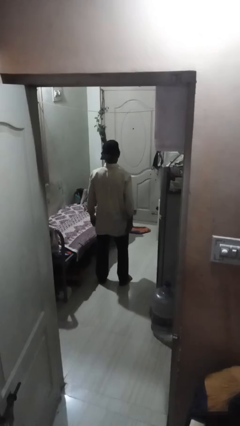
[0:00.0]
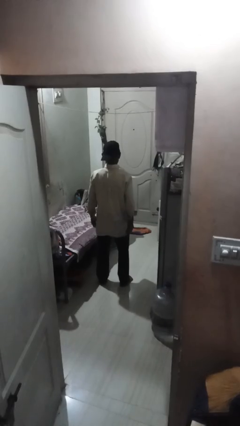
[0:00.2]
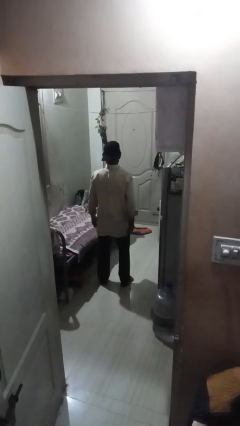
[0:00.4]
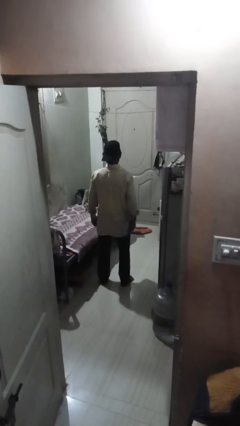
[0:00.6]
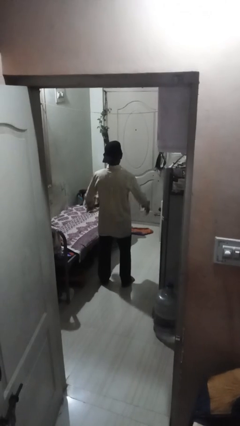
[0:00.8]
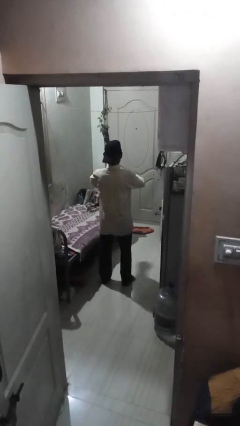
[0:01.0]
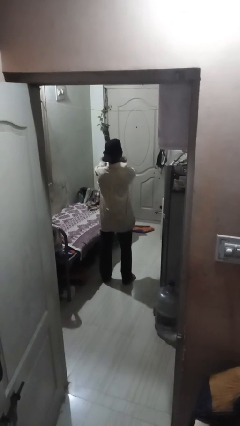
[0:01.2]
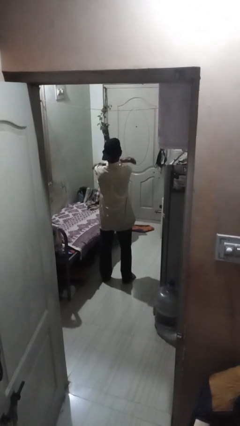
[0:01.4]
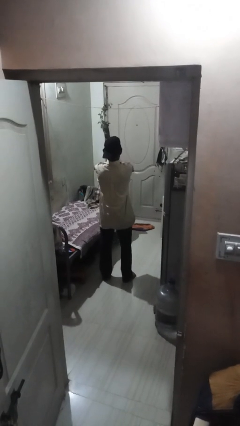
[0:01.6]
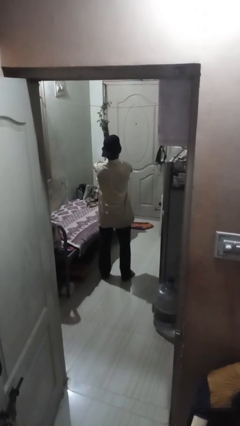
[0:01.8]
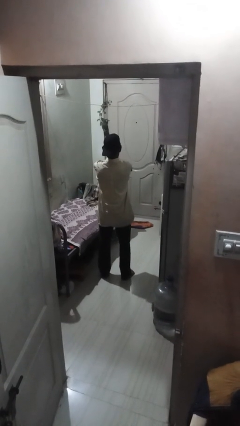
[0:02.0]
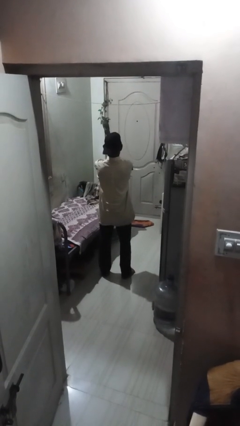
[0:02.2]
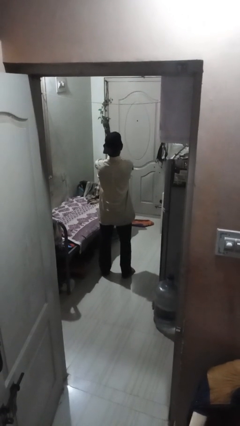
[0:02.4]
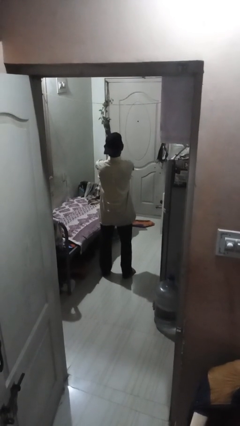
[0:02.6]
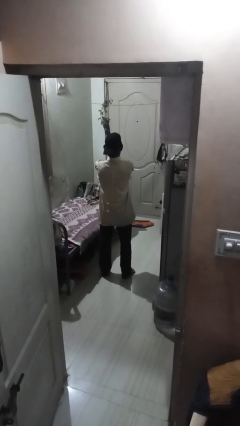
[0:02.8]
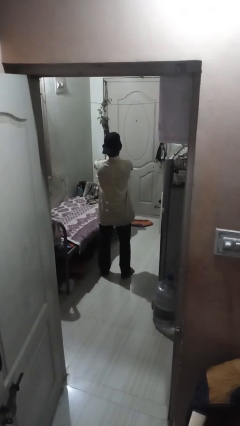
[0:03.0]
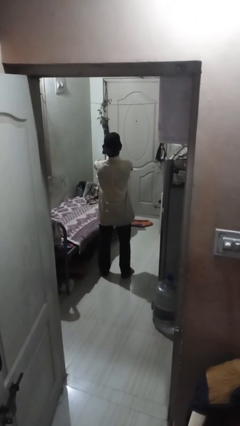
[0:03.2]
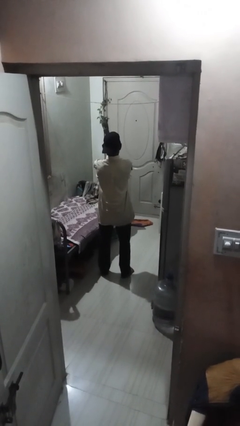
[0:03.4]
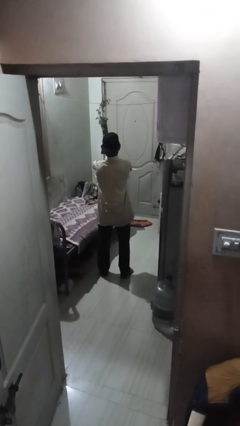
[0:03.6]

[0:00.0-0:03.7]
person crosses arms

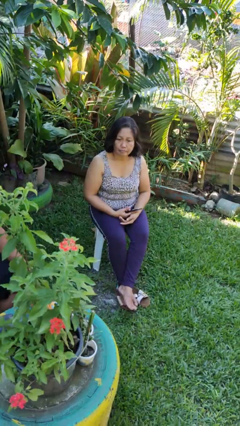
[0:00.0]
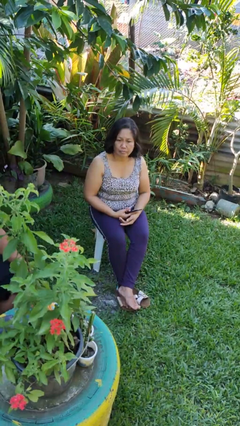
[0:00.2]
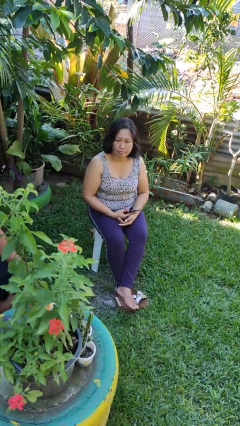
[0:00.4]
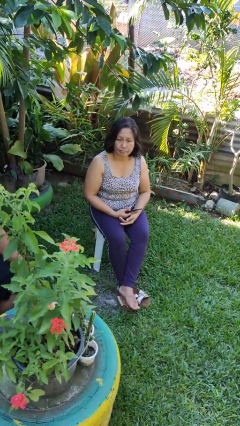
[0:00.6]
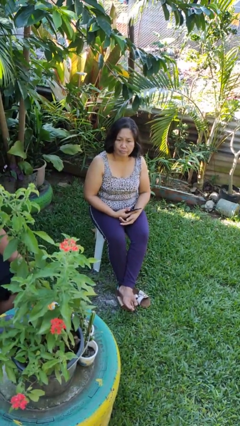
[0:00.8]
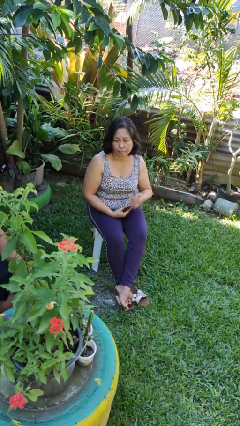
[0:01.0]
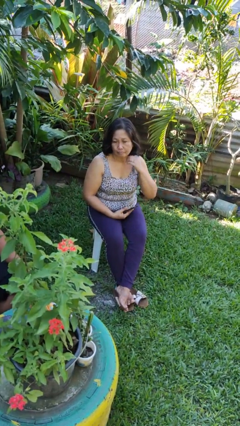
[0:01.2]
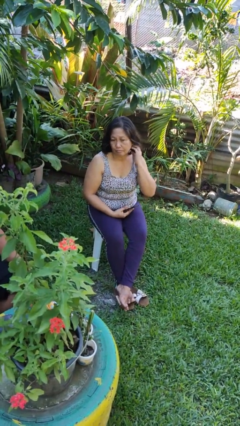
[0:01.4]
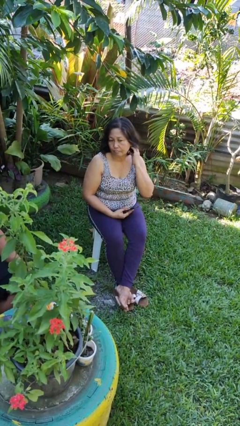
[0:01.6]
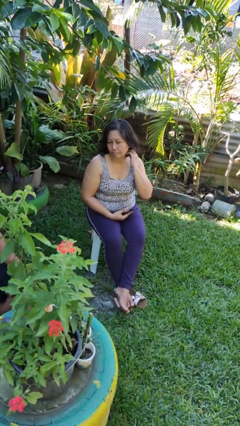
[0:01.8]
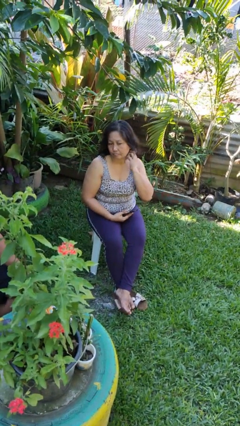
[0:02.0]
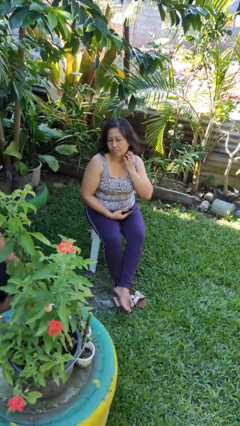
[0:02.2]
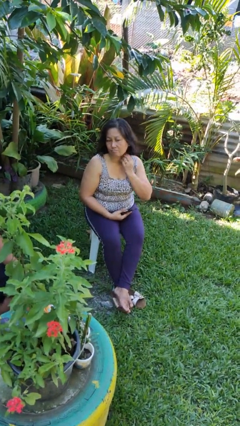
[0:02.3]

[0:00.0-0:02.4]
person scratches face

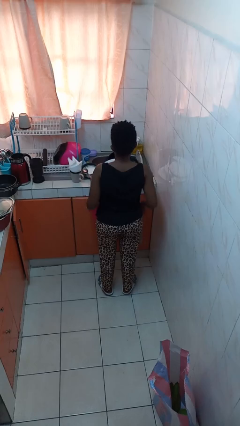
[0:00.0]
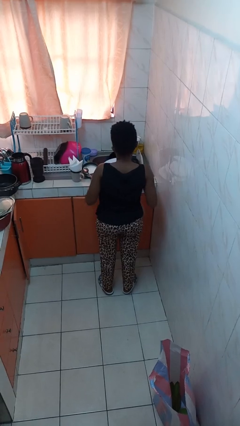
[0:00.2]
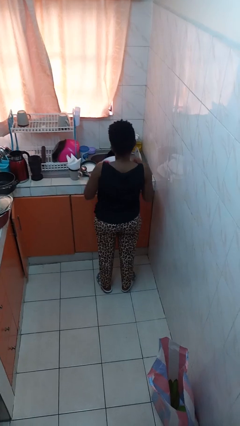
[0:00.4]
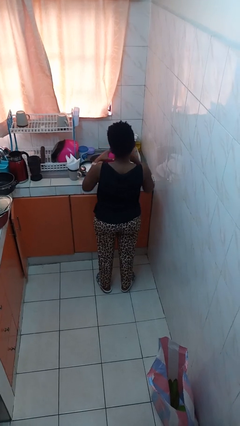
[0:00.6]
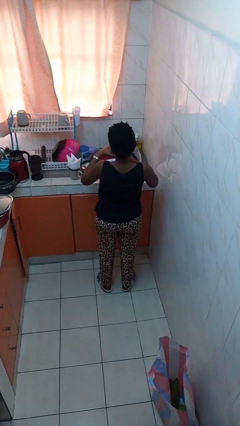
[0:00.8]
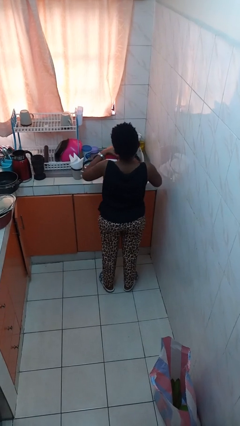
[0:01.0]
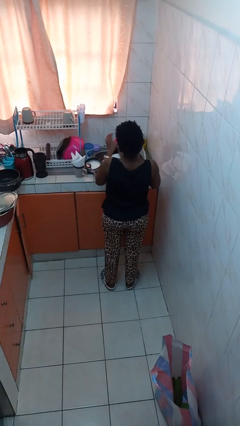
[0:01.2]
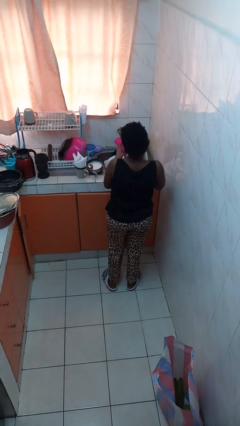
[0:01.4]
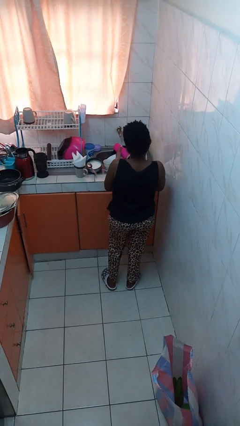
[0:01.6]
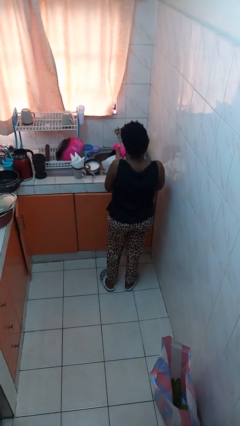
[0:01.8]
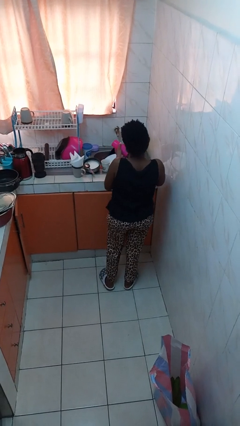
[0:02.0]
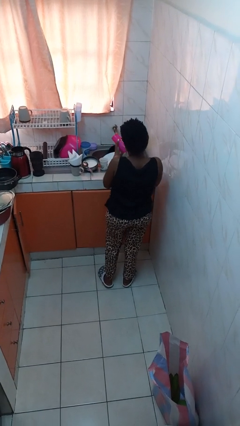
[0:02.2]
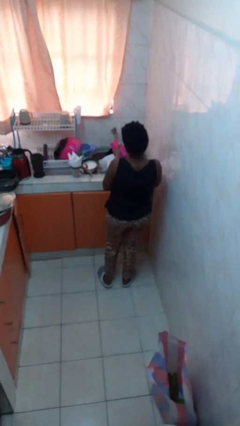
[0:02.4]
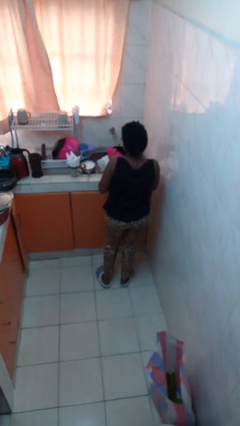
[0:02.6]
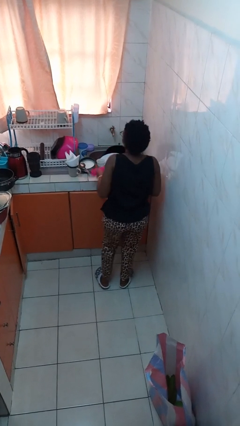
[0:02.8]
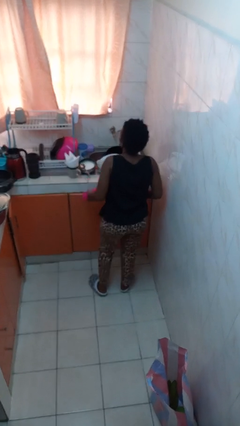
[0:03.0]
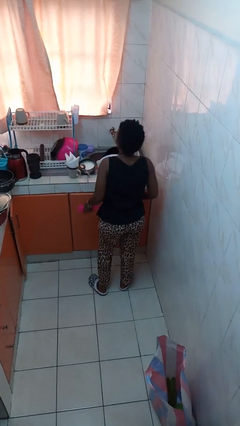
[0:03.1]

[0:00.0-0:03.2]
person dries dish

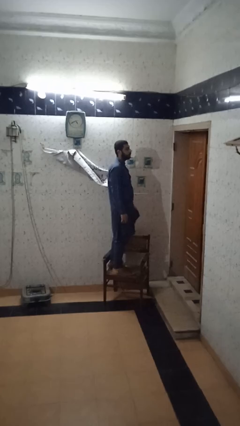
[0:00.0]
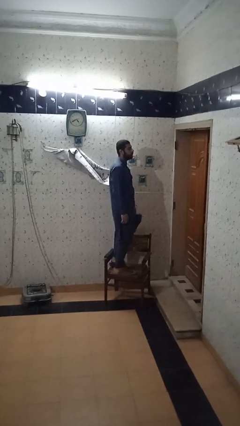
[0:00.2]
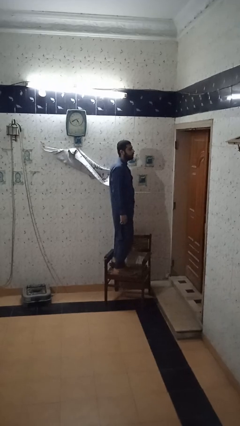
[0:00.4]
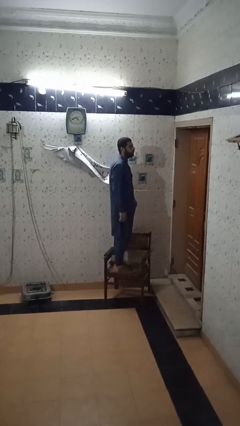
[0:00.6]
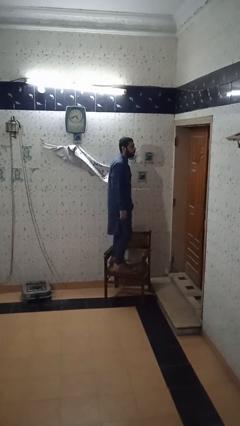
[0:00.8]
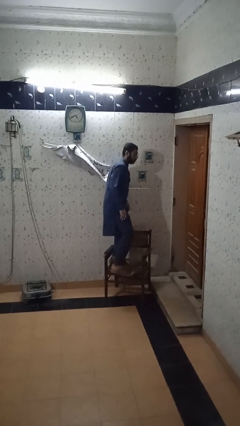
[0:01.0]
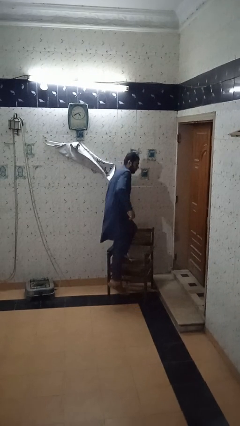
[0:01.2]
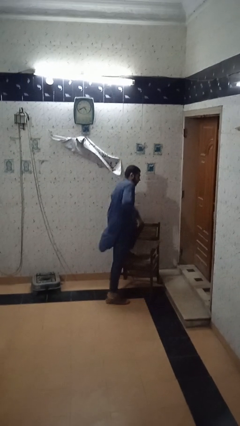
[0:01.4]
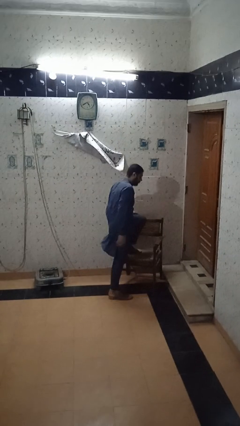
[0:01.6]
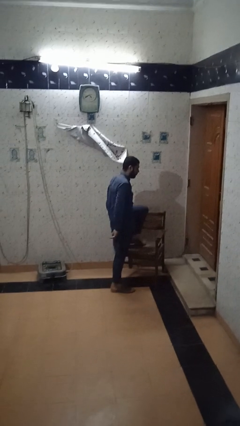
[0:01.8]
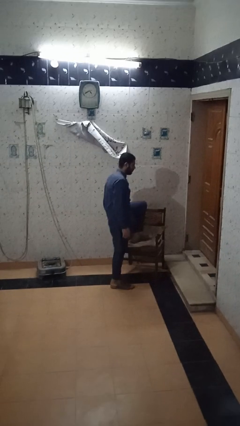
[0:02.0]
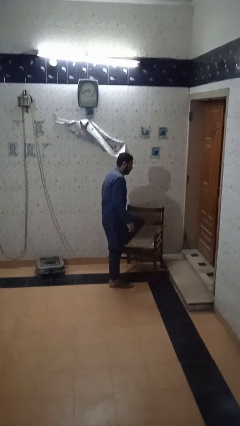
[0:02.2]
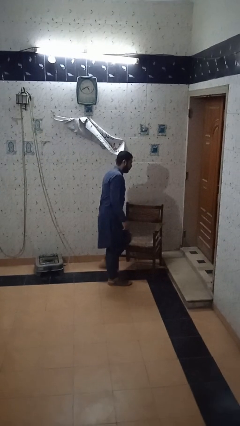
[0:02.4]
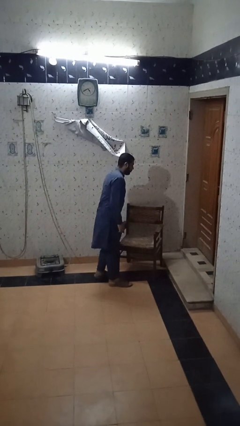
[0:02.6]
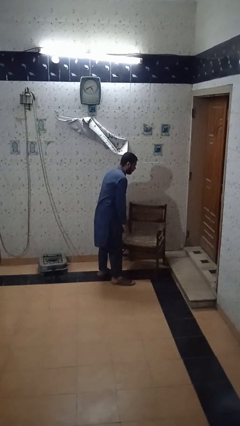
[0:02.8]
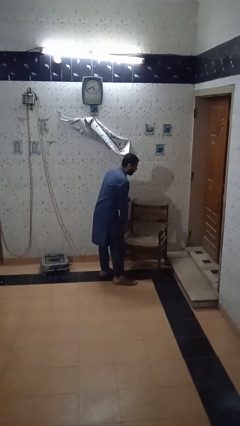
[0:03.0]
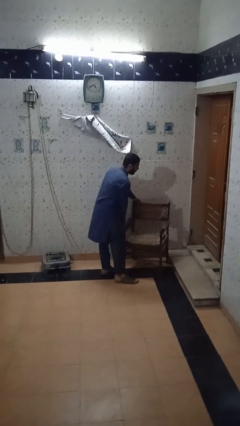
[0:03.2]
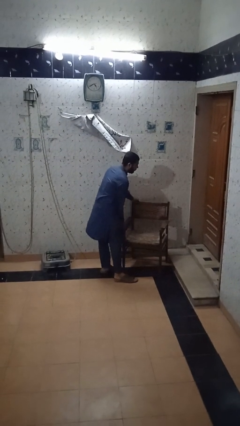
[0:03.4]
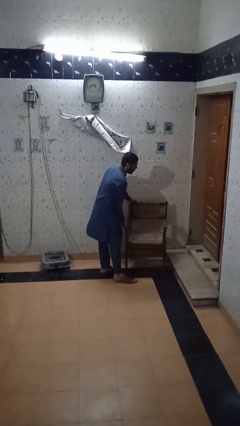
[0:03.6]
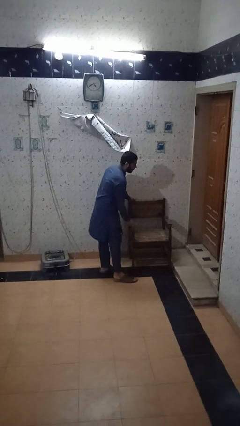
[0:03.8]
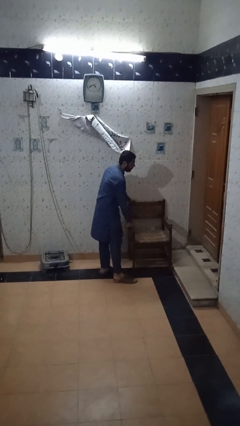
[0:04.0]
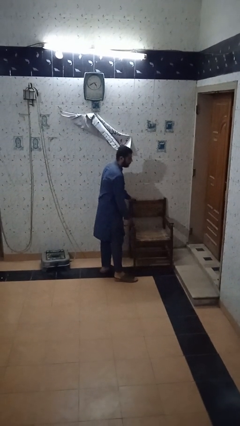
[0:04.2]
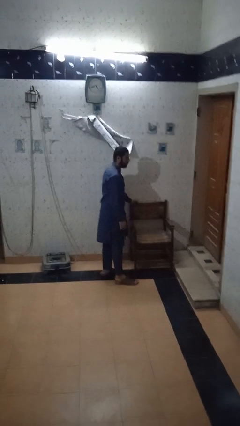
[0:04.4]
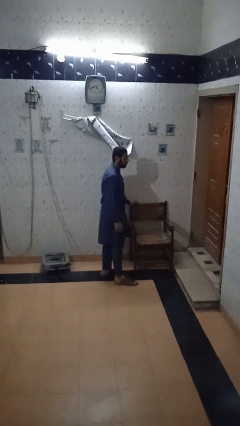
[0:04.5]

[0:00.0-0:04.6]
person climbs off chair

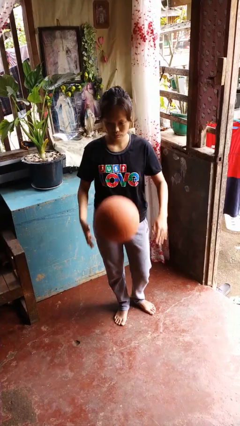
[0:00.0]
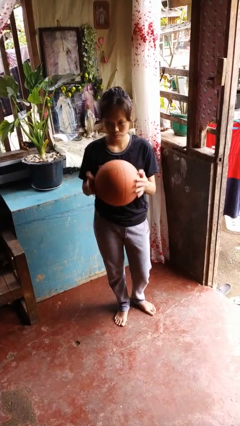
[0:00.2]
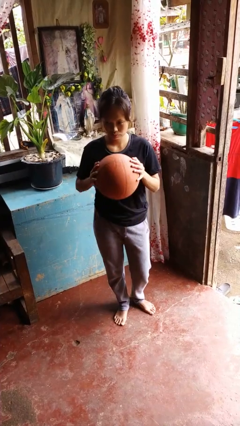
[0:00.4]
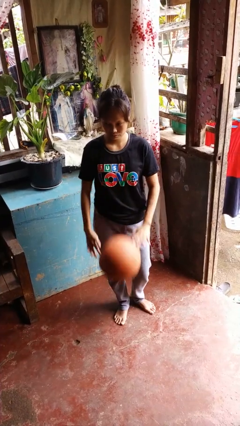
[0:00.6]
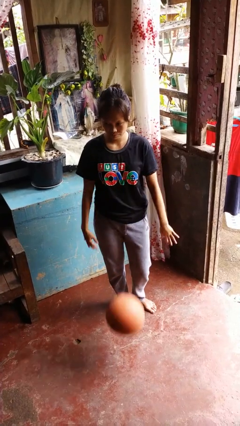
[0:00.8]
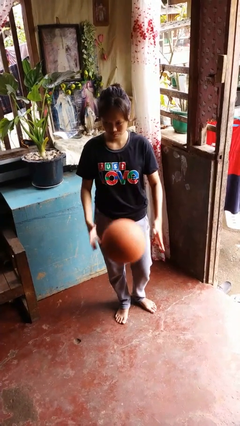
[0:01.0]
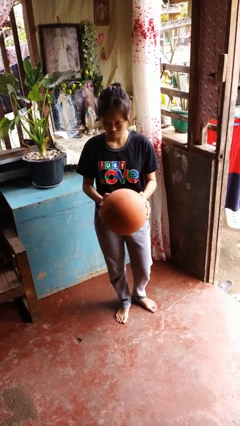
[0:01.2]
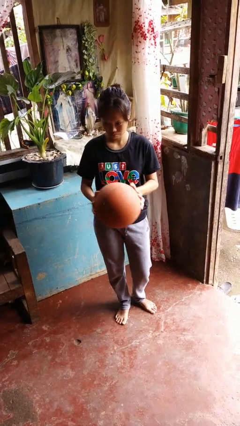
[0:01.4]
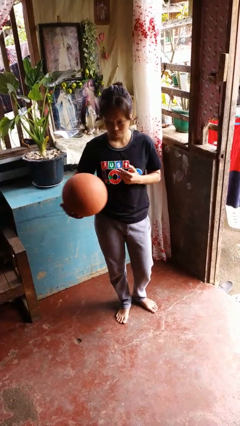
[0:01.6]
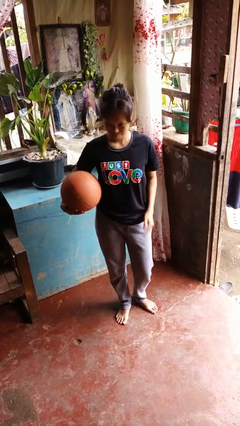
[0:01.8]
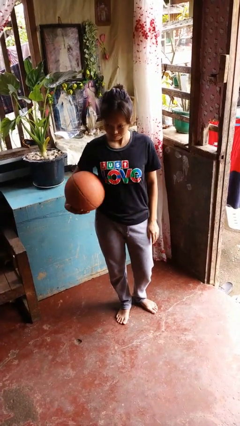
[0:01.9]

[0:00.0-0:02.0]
person bounces ball on floor

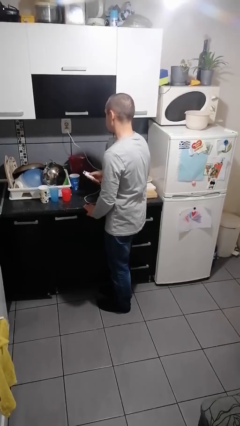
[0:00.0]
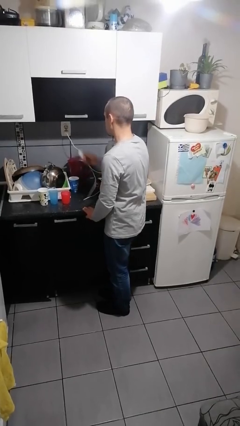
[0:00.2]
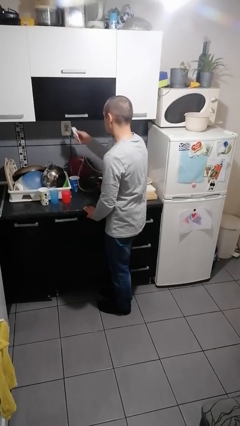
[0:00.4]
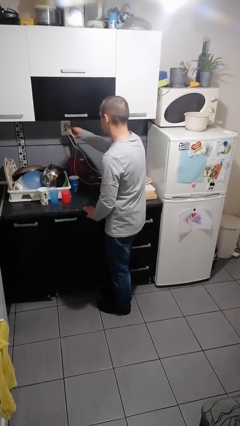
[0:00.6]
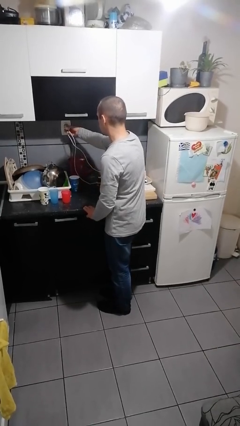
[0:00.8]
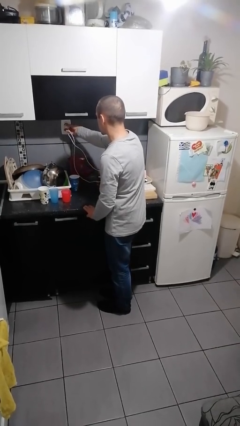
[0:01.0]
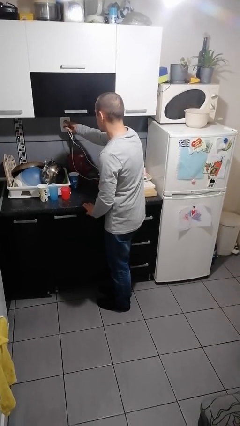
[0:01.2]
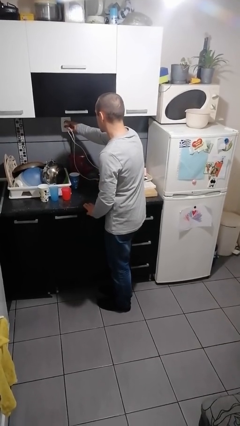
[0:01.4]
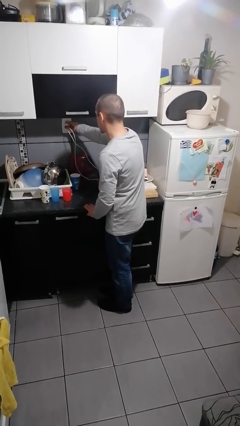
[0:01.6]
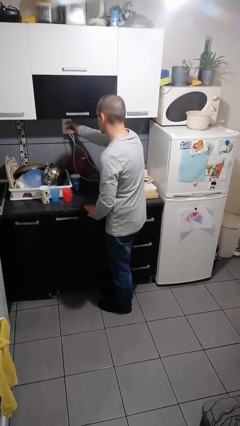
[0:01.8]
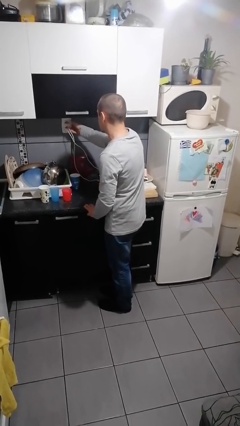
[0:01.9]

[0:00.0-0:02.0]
person plugs into electrical socket
